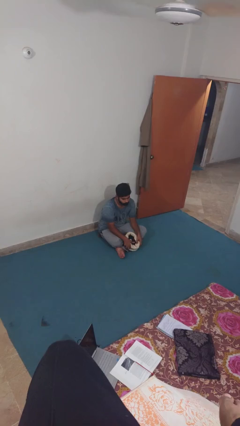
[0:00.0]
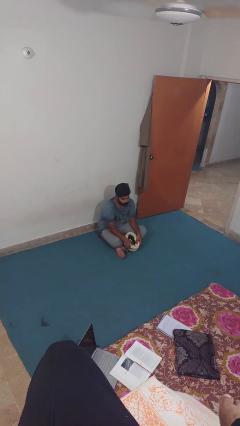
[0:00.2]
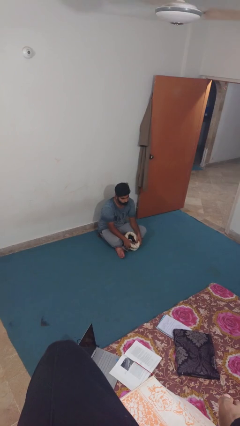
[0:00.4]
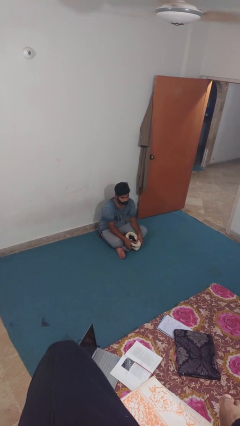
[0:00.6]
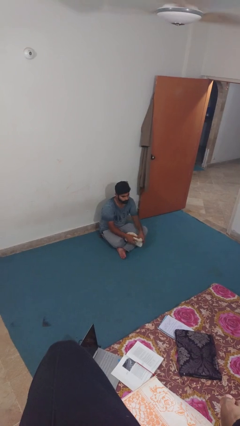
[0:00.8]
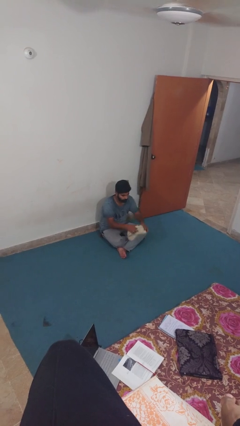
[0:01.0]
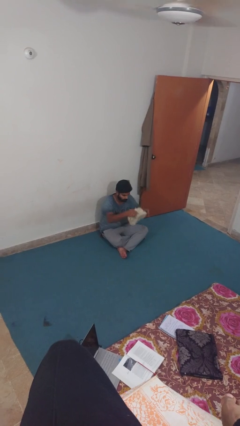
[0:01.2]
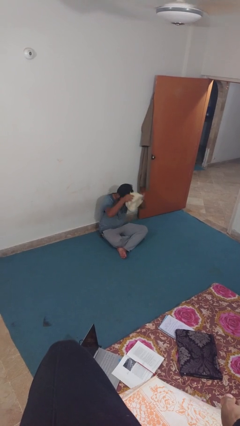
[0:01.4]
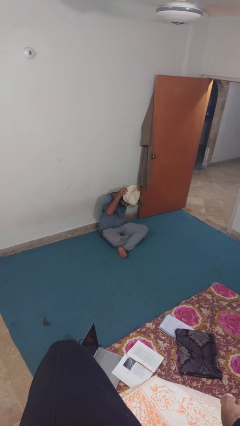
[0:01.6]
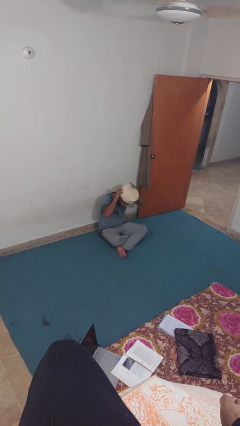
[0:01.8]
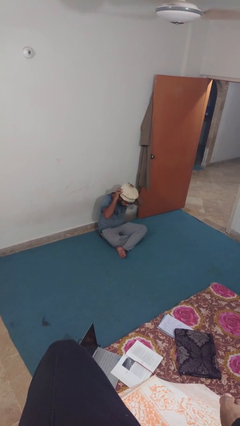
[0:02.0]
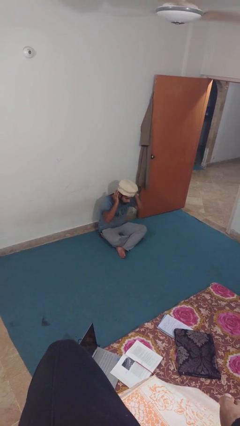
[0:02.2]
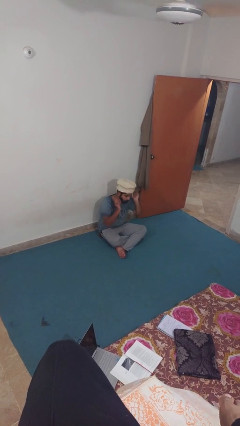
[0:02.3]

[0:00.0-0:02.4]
person puts on hat

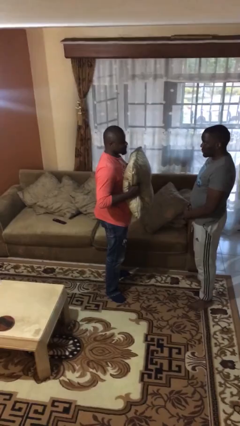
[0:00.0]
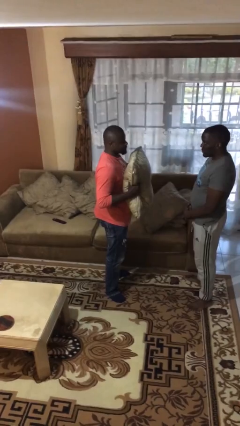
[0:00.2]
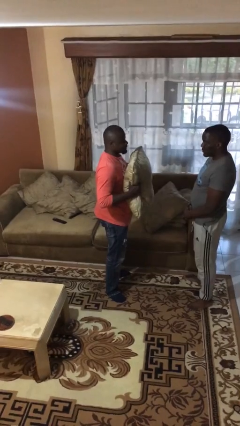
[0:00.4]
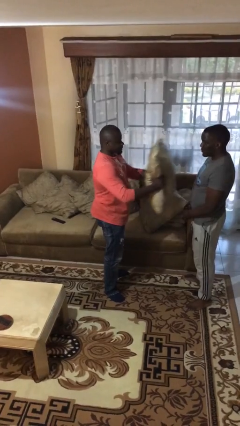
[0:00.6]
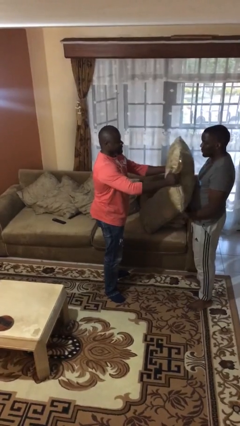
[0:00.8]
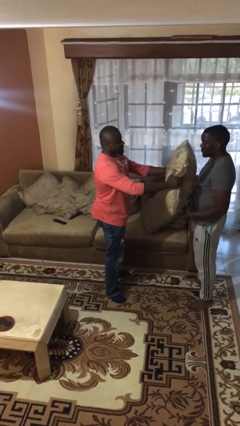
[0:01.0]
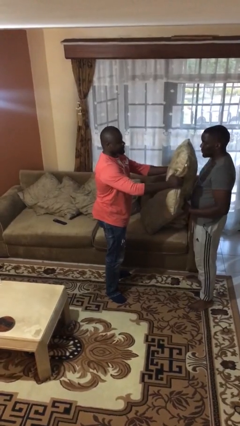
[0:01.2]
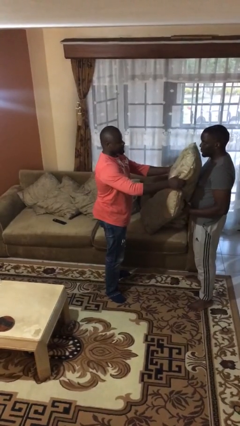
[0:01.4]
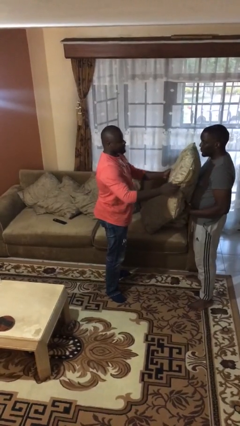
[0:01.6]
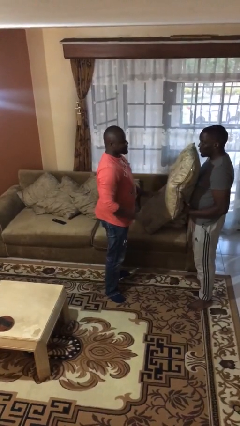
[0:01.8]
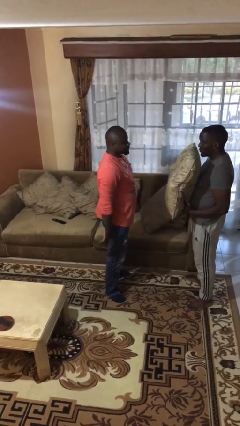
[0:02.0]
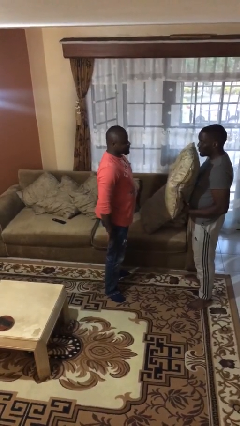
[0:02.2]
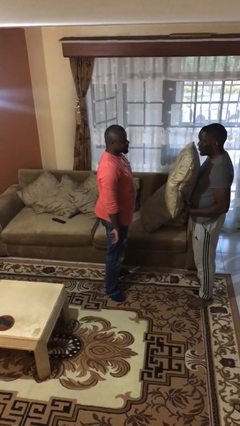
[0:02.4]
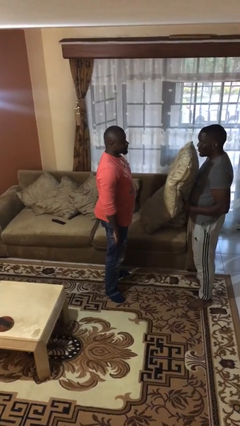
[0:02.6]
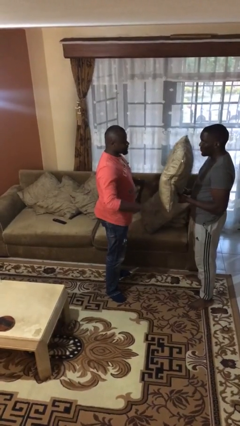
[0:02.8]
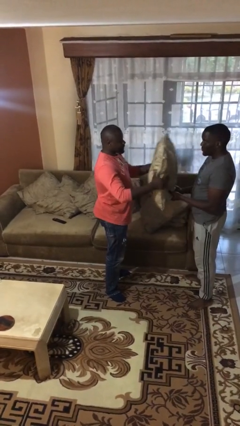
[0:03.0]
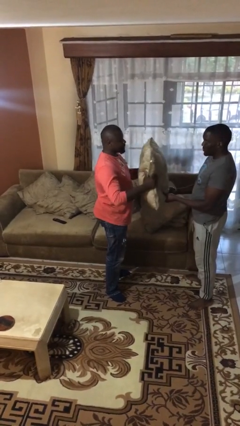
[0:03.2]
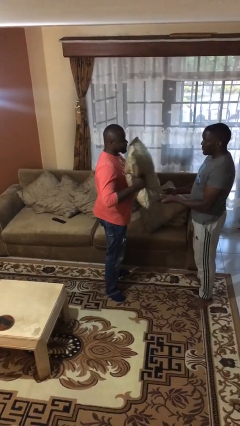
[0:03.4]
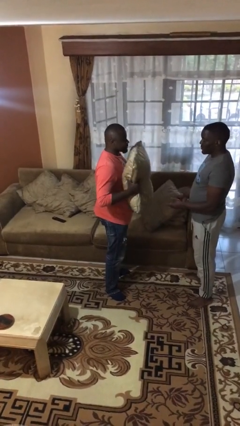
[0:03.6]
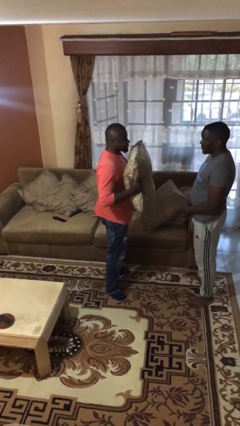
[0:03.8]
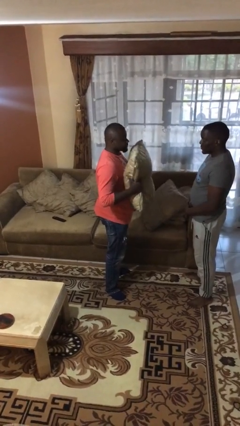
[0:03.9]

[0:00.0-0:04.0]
person transfers object to person

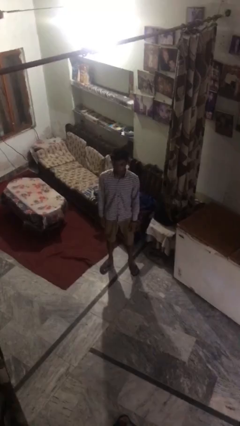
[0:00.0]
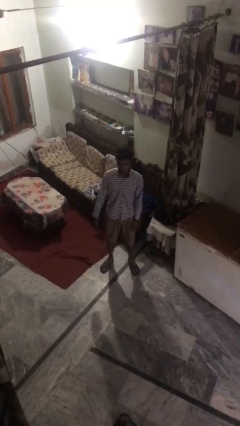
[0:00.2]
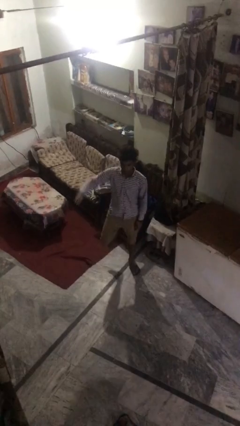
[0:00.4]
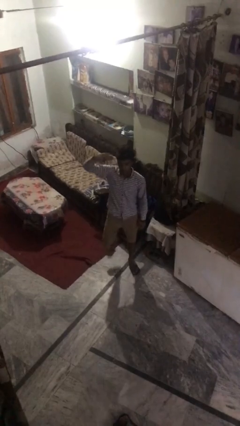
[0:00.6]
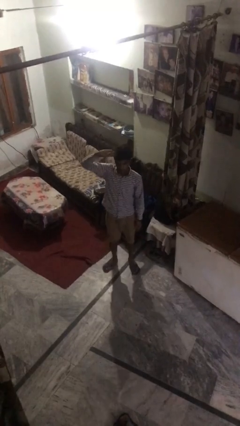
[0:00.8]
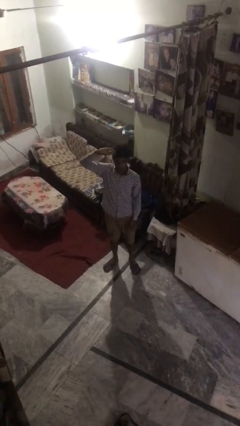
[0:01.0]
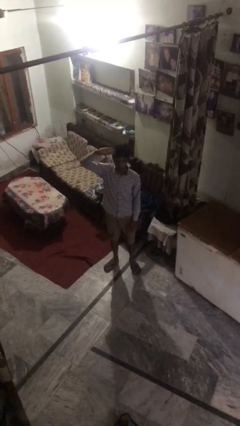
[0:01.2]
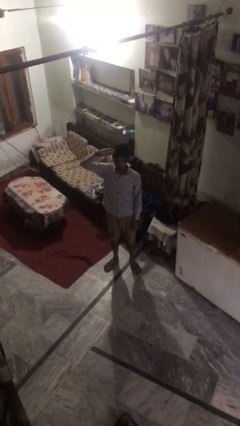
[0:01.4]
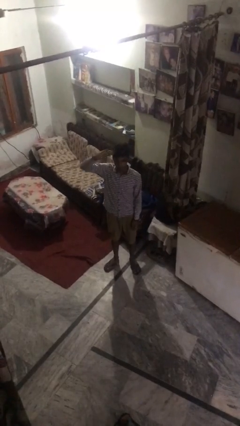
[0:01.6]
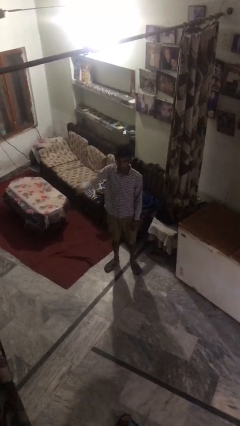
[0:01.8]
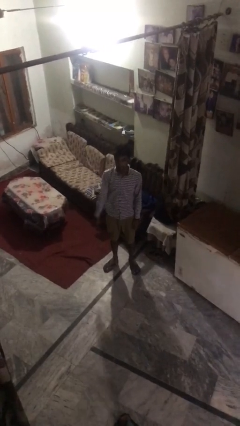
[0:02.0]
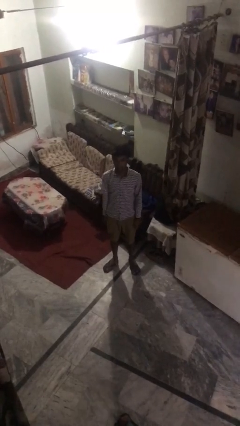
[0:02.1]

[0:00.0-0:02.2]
person salutes

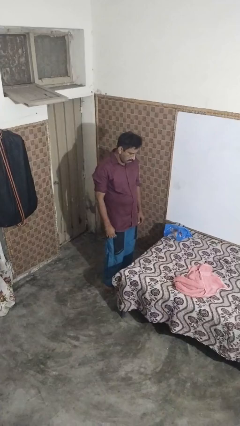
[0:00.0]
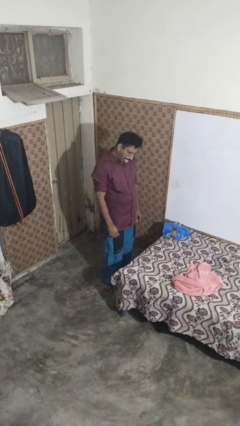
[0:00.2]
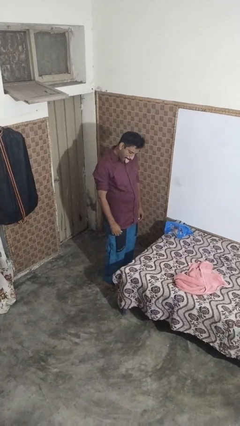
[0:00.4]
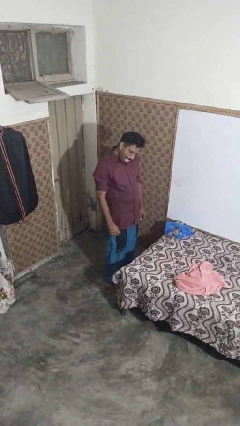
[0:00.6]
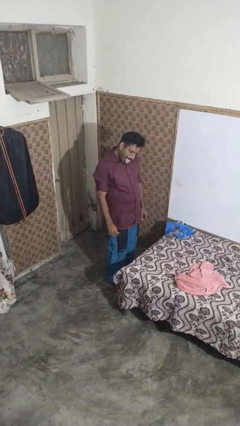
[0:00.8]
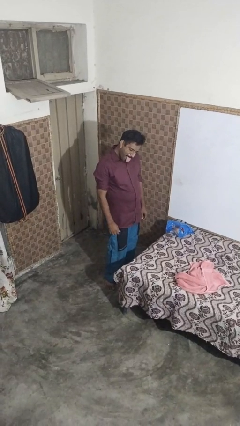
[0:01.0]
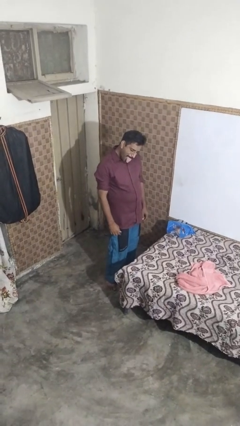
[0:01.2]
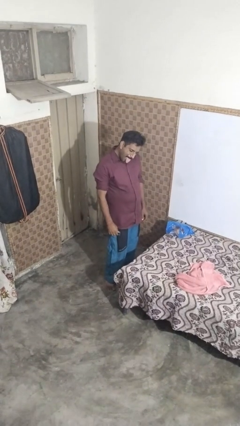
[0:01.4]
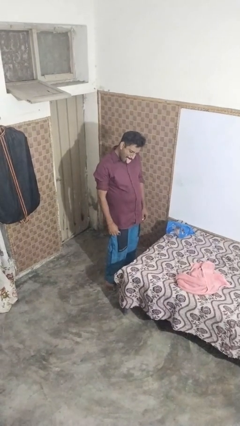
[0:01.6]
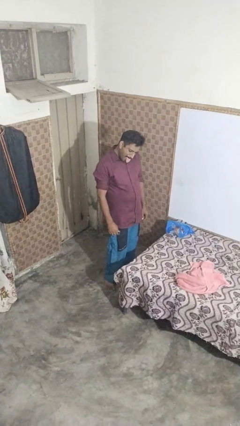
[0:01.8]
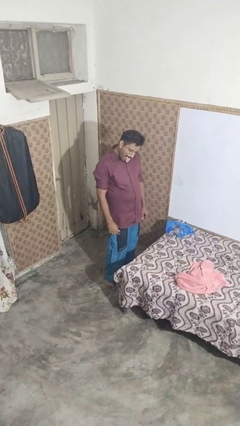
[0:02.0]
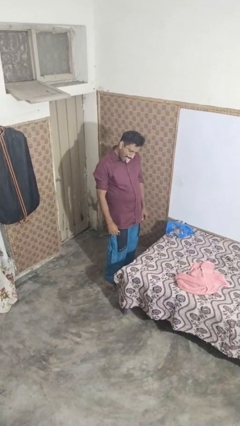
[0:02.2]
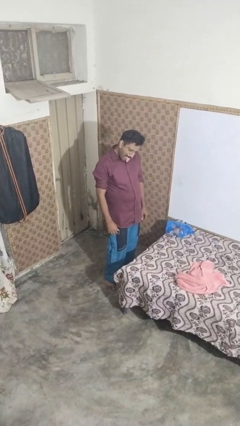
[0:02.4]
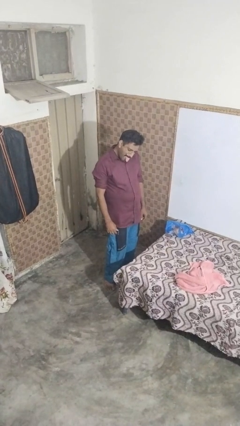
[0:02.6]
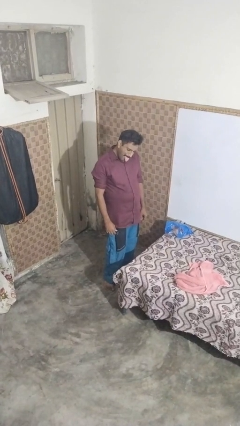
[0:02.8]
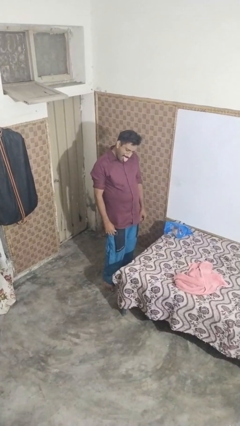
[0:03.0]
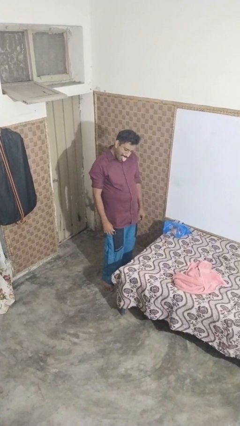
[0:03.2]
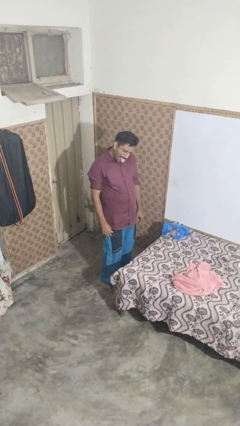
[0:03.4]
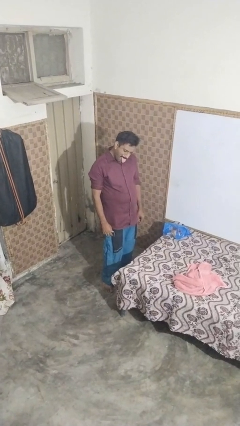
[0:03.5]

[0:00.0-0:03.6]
person sticks out tongue

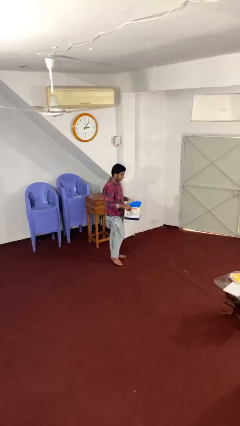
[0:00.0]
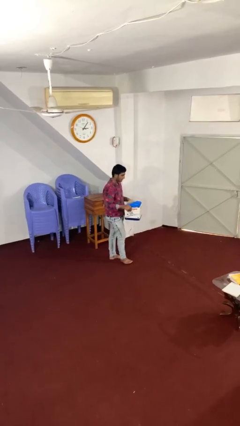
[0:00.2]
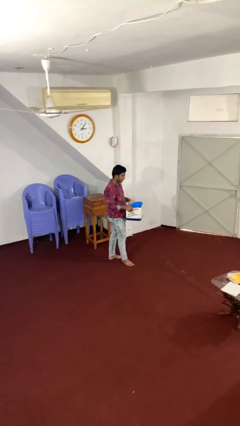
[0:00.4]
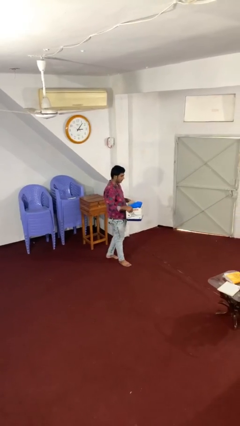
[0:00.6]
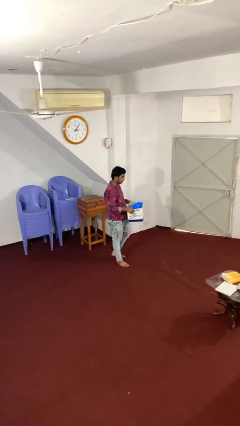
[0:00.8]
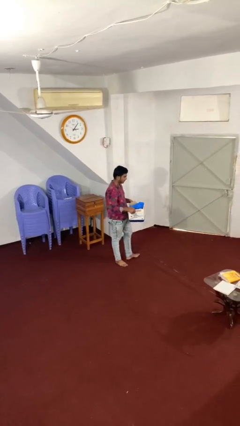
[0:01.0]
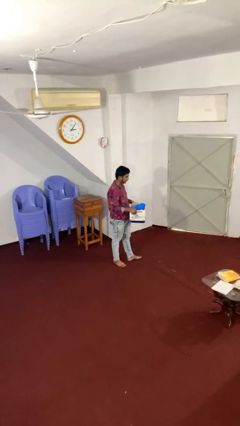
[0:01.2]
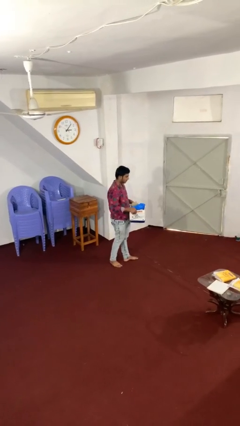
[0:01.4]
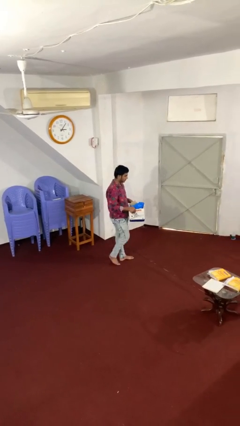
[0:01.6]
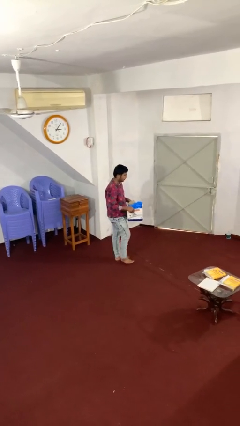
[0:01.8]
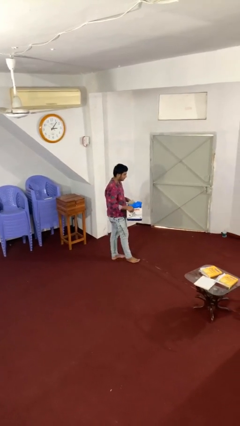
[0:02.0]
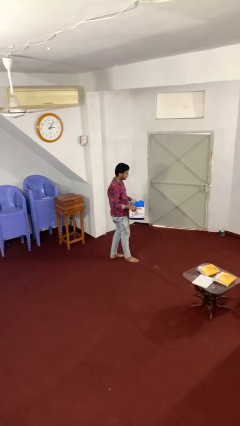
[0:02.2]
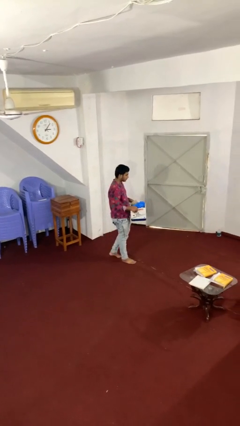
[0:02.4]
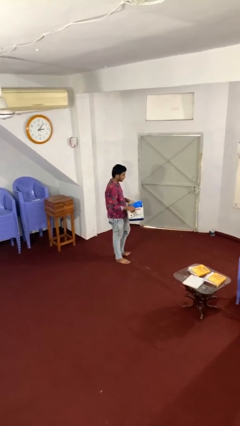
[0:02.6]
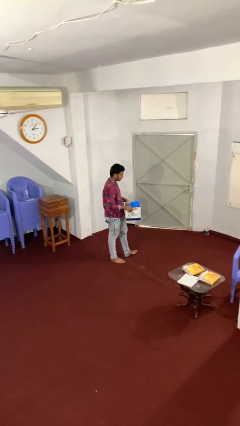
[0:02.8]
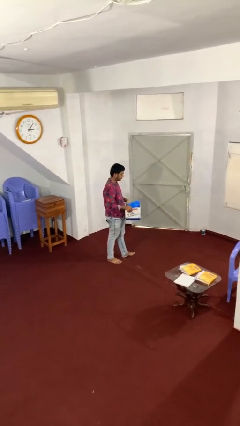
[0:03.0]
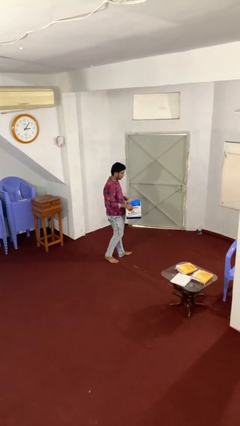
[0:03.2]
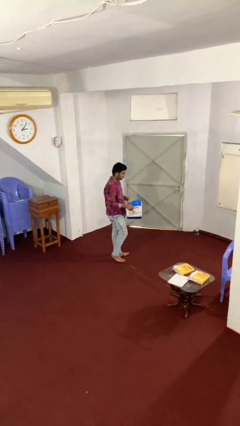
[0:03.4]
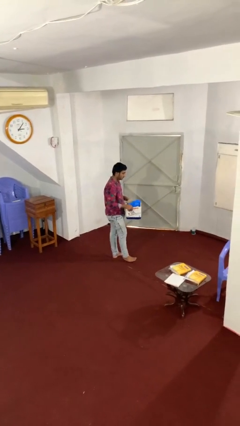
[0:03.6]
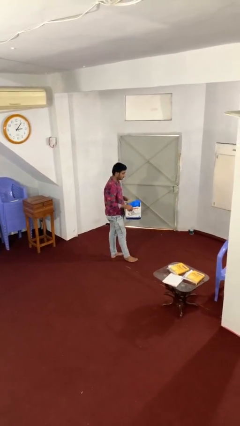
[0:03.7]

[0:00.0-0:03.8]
person carries heavy object

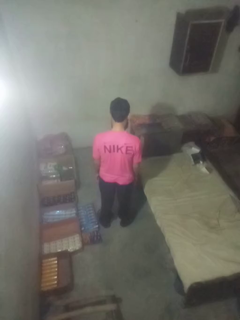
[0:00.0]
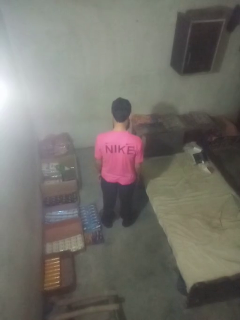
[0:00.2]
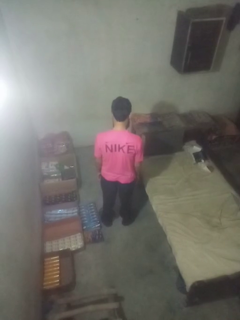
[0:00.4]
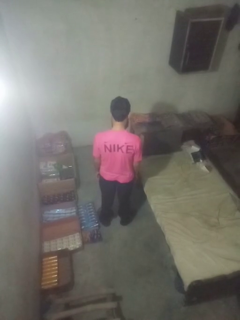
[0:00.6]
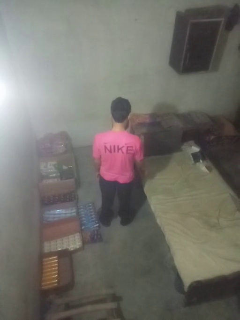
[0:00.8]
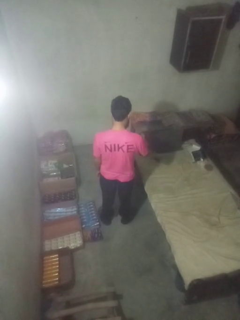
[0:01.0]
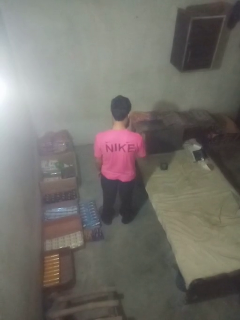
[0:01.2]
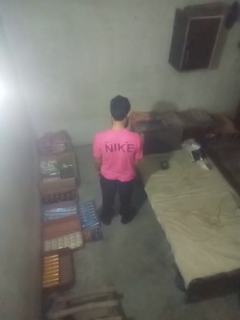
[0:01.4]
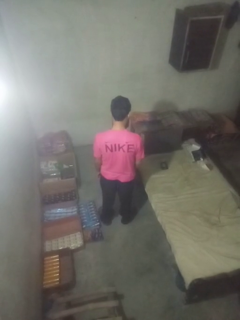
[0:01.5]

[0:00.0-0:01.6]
person throws object on bed
